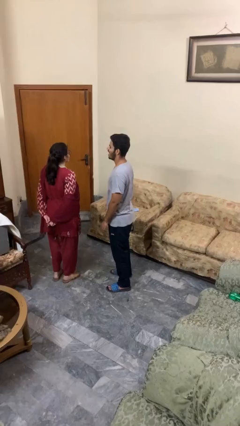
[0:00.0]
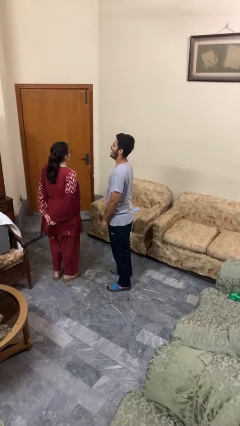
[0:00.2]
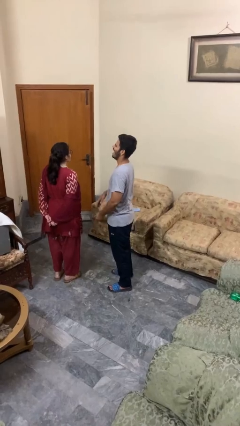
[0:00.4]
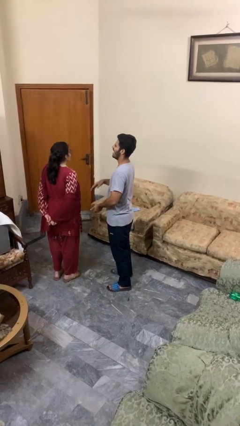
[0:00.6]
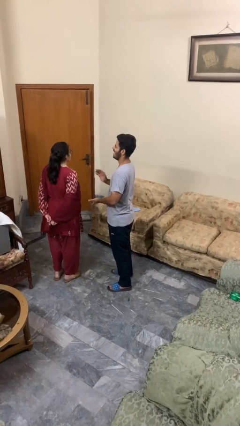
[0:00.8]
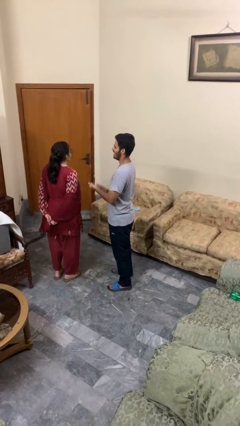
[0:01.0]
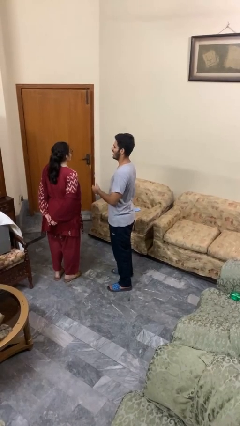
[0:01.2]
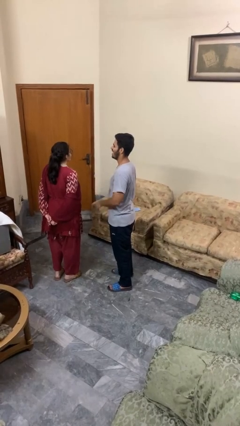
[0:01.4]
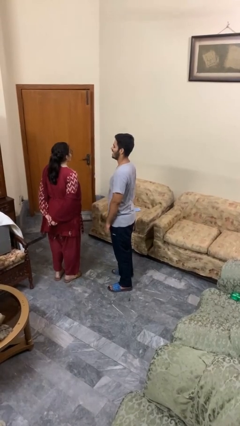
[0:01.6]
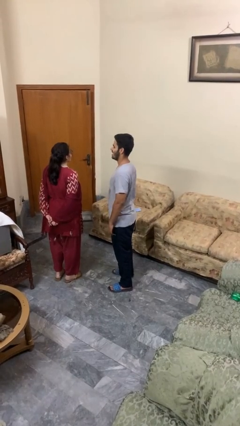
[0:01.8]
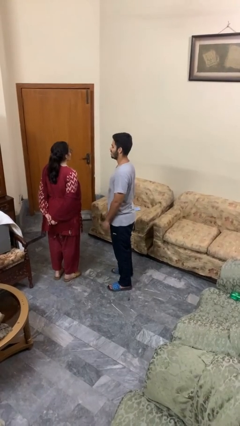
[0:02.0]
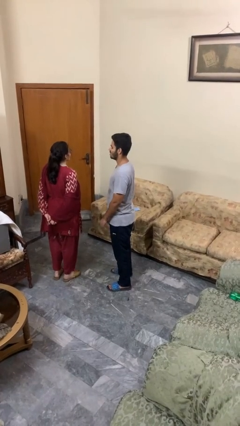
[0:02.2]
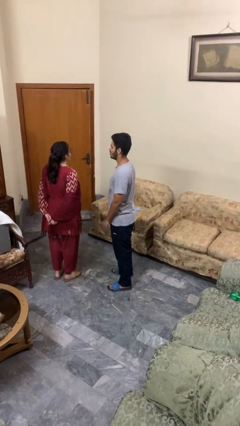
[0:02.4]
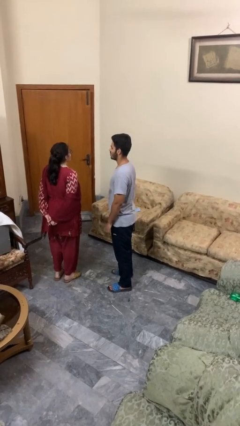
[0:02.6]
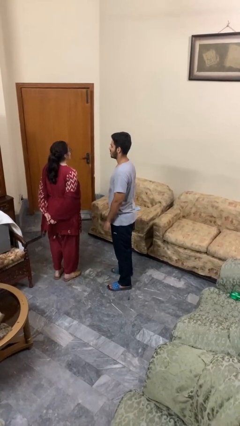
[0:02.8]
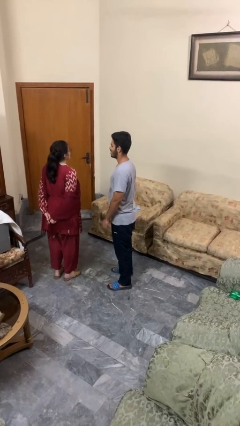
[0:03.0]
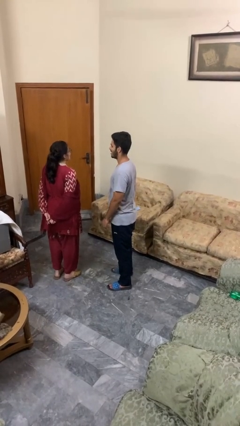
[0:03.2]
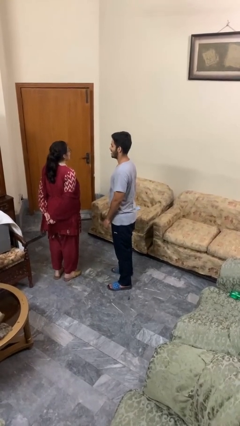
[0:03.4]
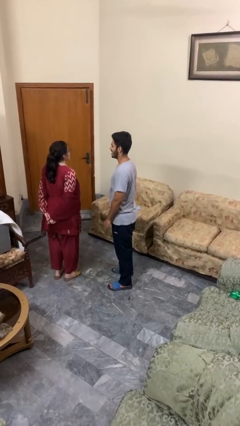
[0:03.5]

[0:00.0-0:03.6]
person laughs with person

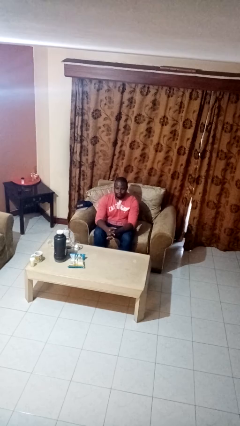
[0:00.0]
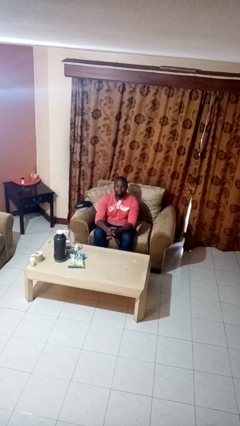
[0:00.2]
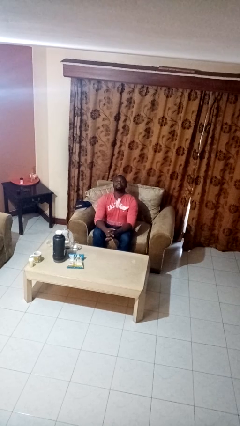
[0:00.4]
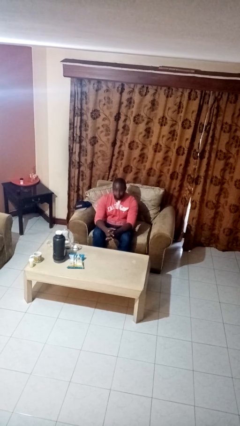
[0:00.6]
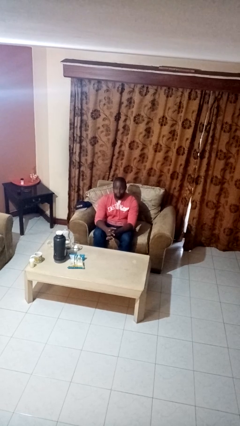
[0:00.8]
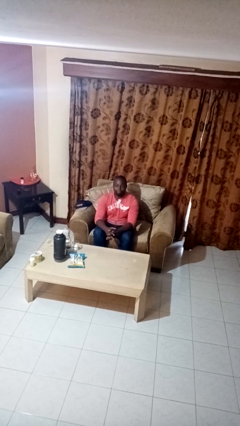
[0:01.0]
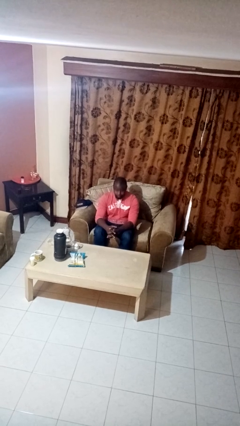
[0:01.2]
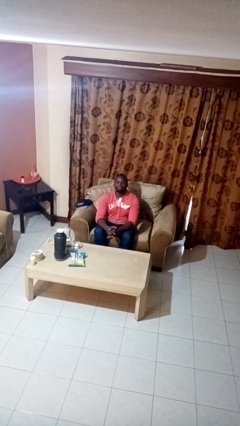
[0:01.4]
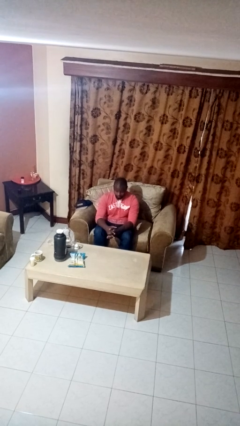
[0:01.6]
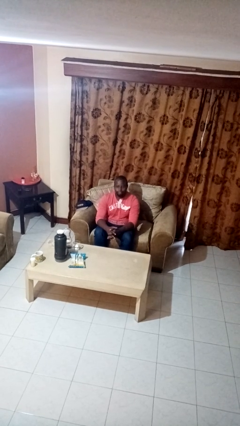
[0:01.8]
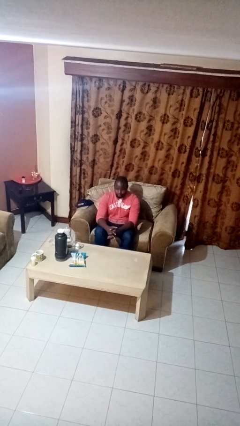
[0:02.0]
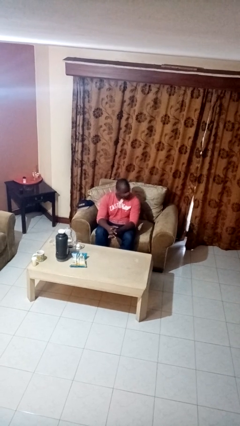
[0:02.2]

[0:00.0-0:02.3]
person nods head

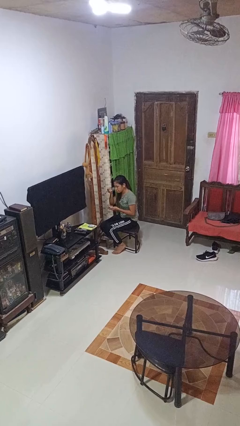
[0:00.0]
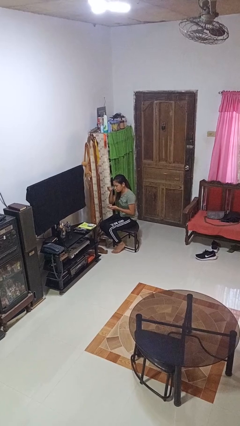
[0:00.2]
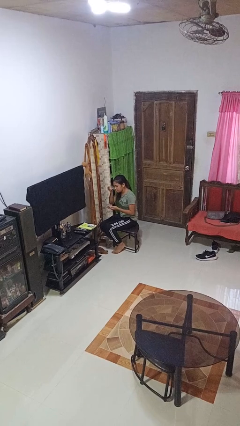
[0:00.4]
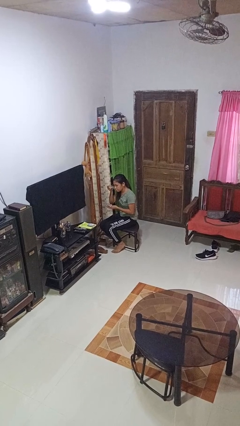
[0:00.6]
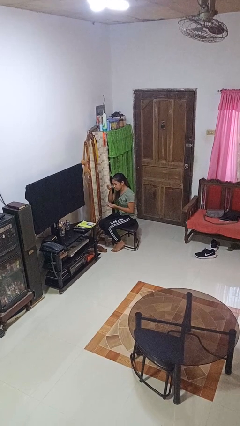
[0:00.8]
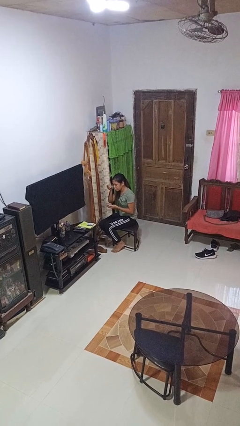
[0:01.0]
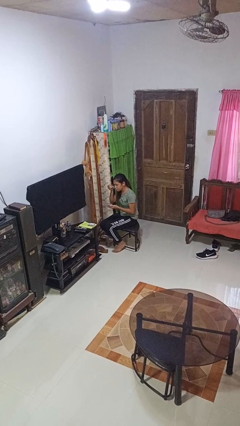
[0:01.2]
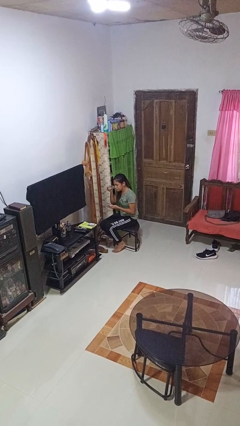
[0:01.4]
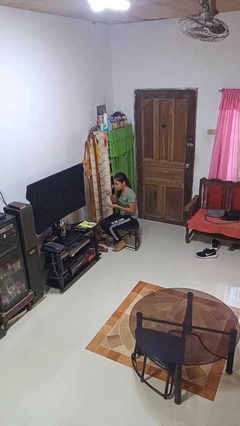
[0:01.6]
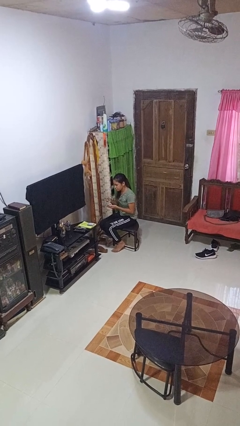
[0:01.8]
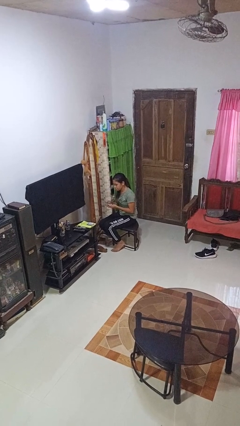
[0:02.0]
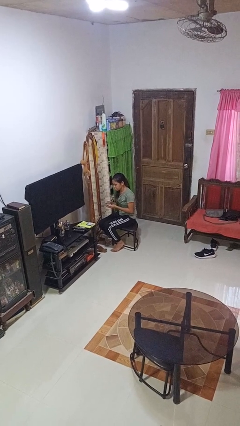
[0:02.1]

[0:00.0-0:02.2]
person applies eye makeup

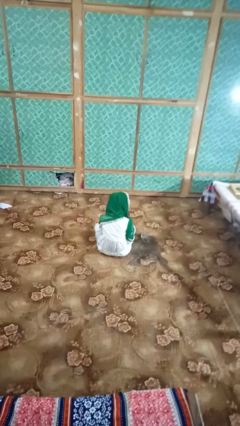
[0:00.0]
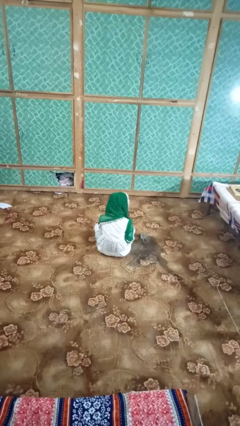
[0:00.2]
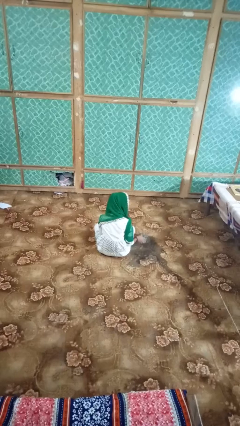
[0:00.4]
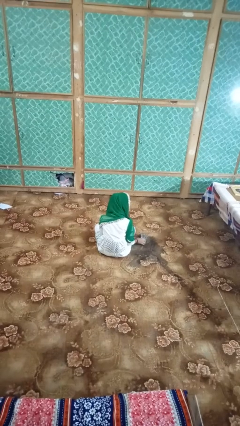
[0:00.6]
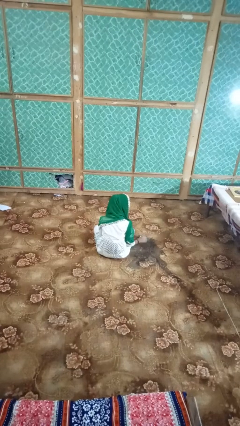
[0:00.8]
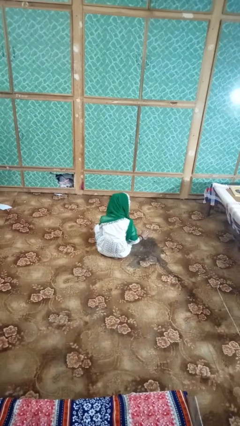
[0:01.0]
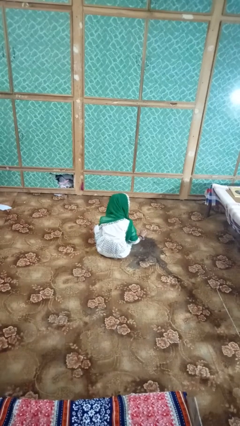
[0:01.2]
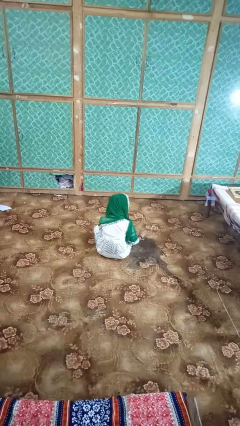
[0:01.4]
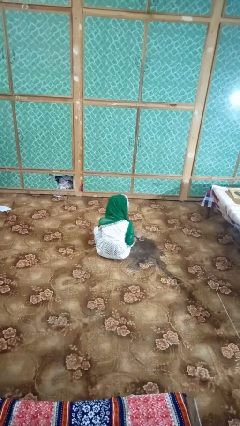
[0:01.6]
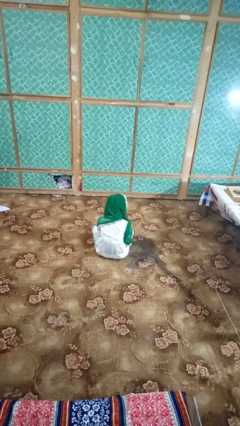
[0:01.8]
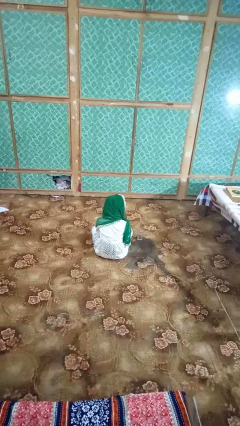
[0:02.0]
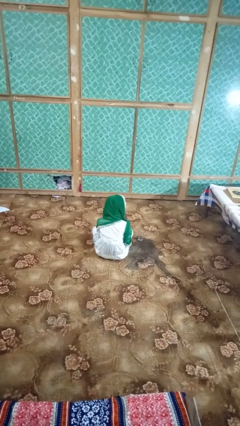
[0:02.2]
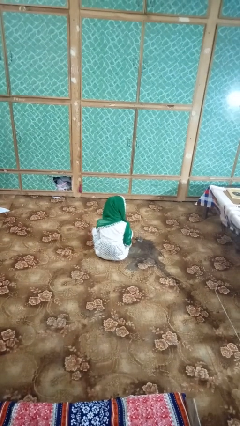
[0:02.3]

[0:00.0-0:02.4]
person sets upright glass

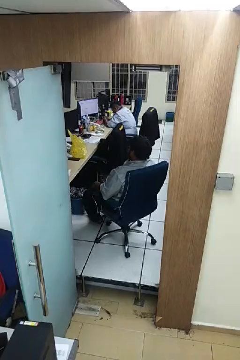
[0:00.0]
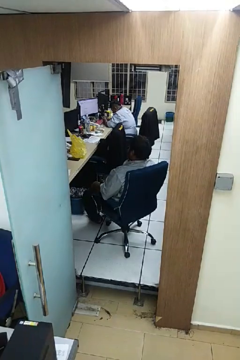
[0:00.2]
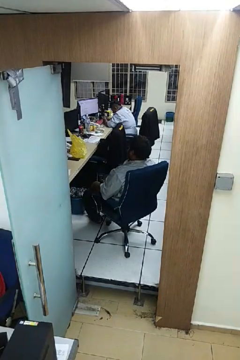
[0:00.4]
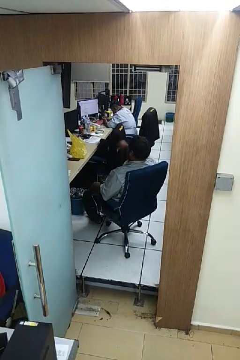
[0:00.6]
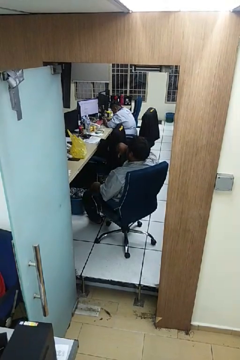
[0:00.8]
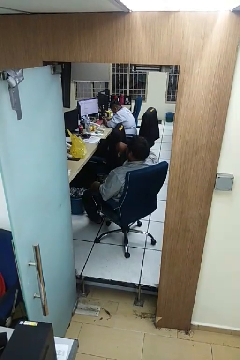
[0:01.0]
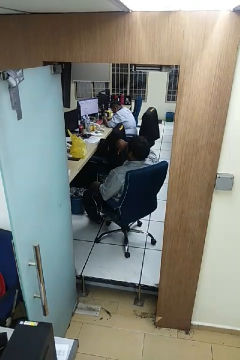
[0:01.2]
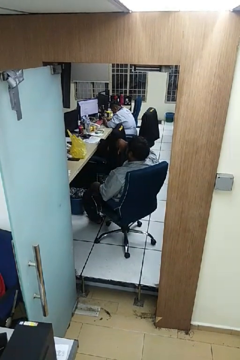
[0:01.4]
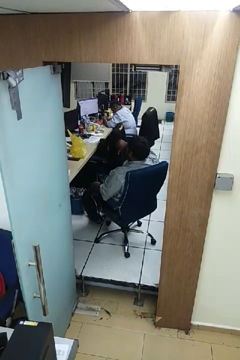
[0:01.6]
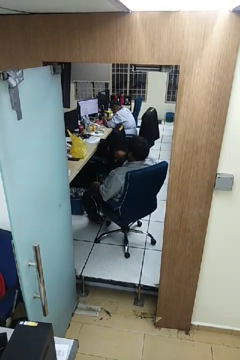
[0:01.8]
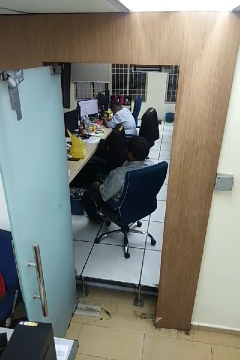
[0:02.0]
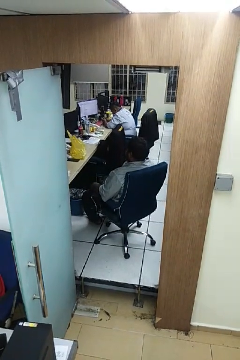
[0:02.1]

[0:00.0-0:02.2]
person gestures thumbs down

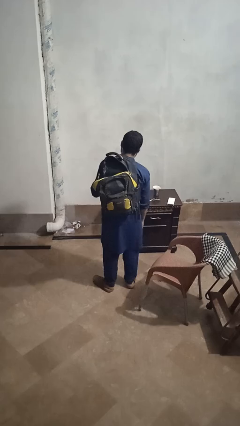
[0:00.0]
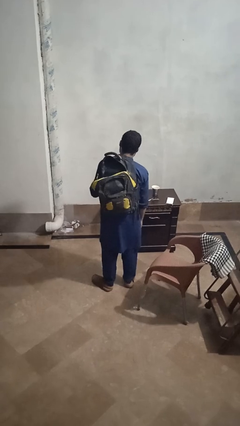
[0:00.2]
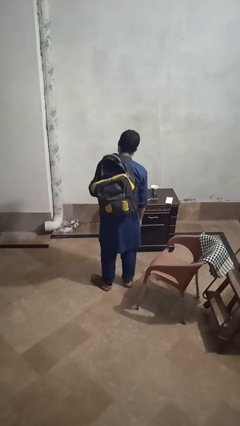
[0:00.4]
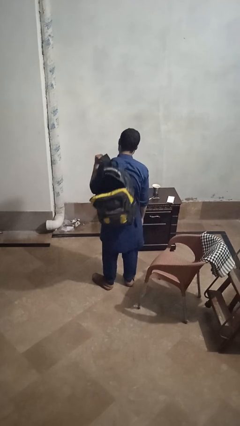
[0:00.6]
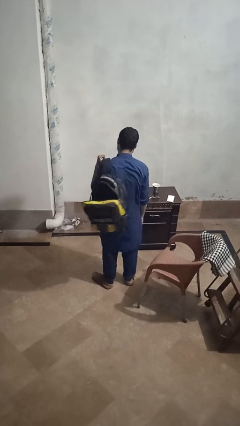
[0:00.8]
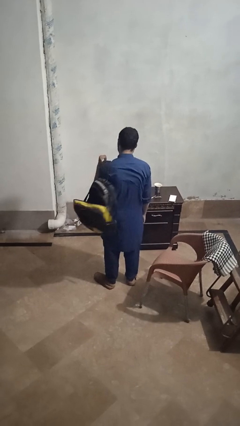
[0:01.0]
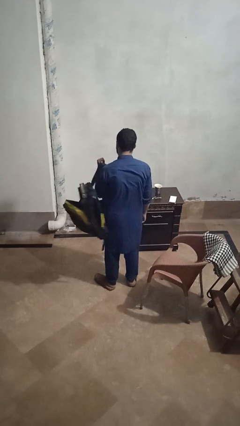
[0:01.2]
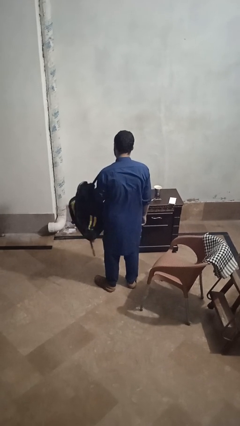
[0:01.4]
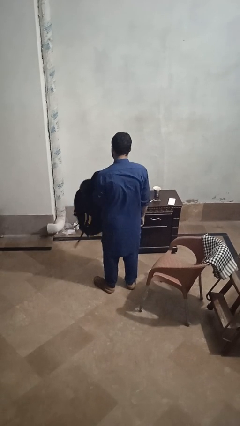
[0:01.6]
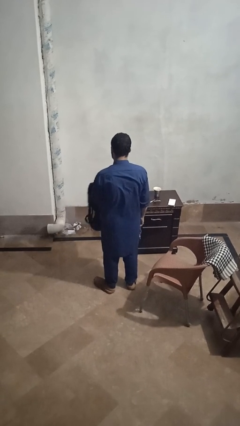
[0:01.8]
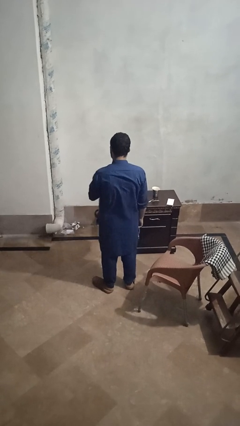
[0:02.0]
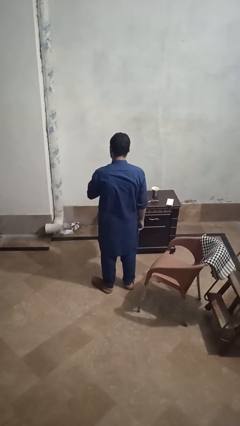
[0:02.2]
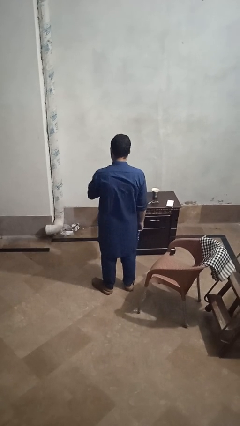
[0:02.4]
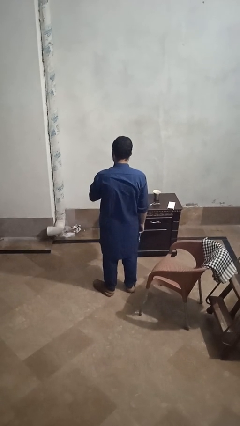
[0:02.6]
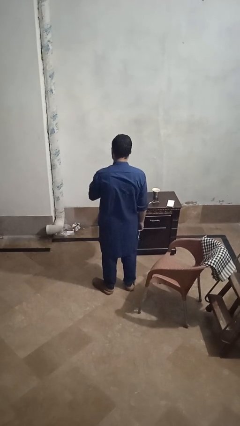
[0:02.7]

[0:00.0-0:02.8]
person takes off backpack

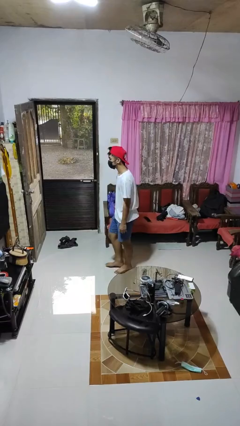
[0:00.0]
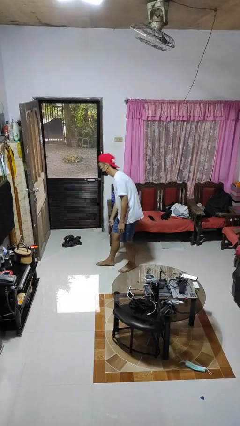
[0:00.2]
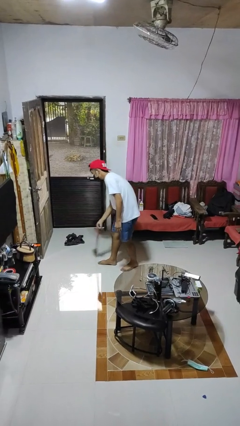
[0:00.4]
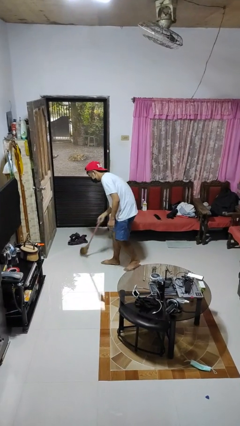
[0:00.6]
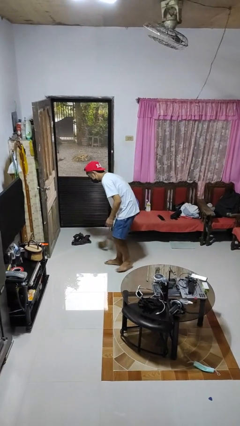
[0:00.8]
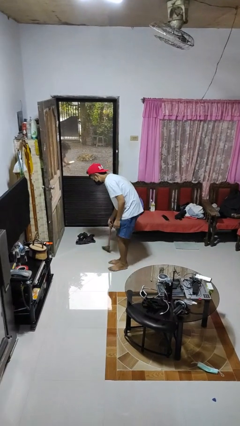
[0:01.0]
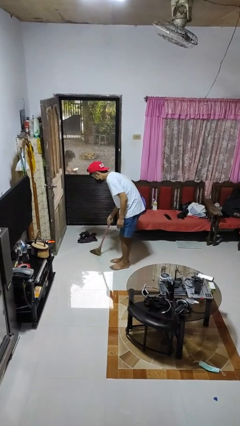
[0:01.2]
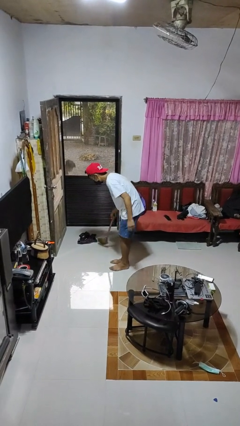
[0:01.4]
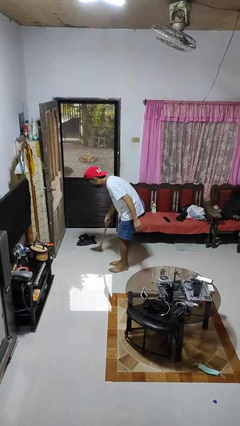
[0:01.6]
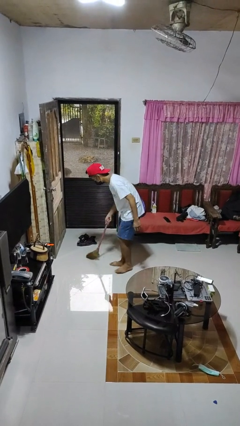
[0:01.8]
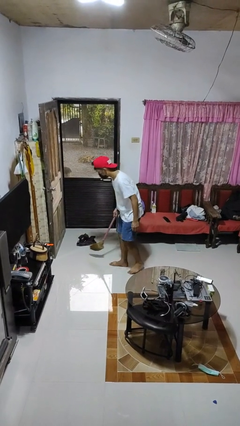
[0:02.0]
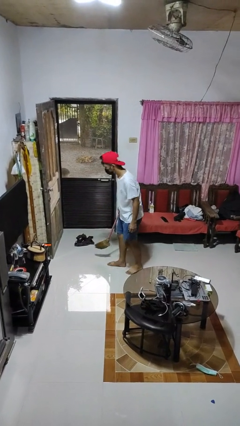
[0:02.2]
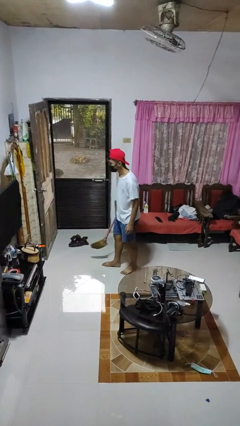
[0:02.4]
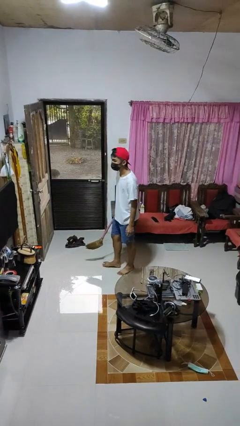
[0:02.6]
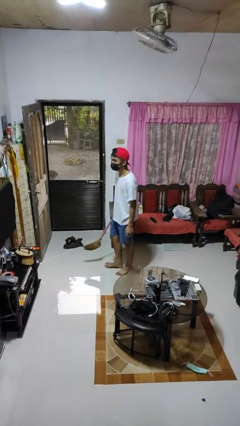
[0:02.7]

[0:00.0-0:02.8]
person sweeps floor
